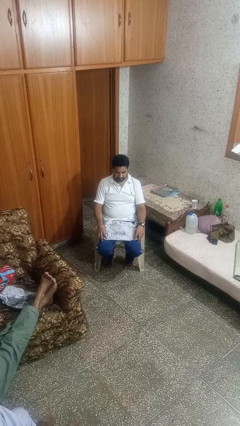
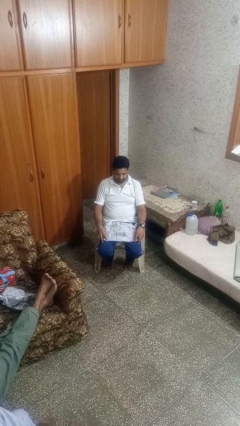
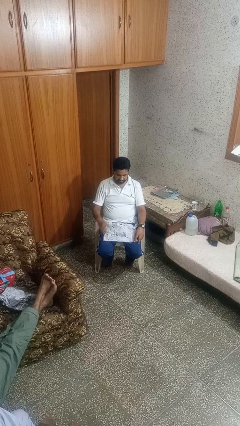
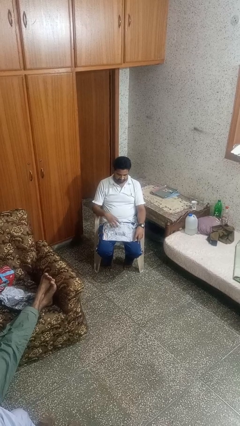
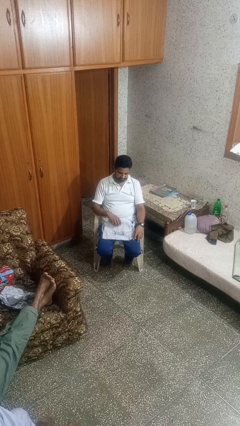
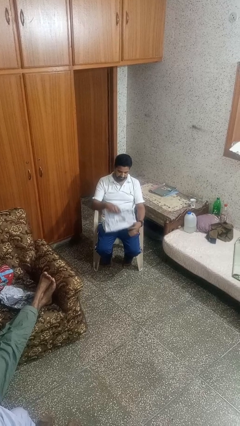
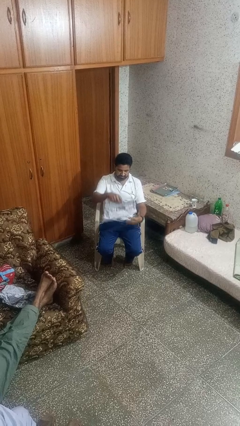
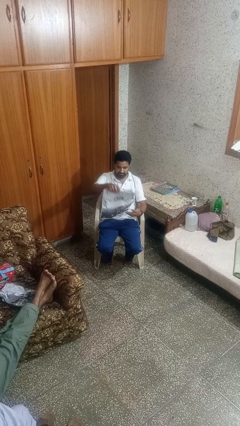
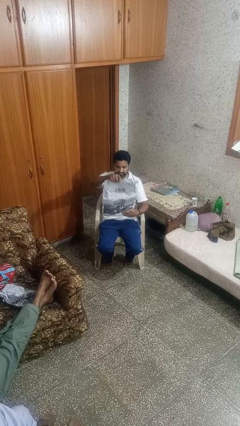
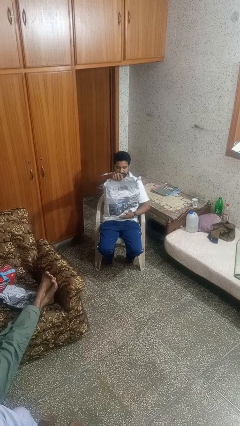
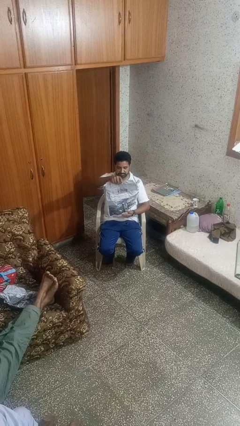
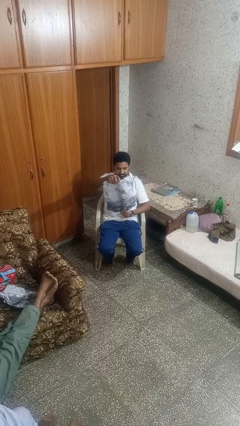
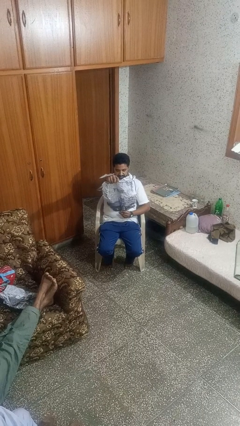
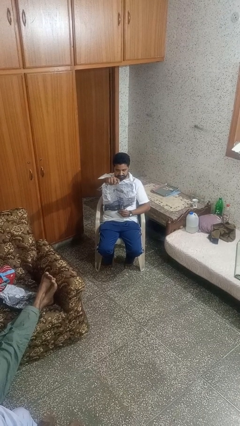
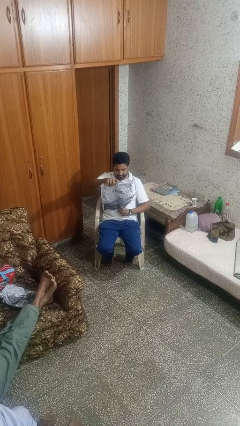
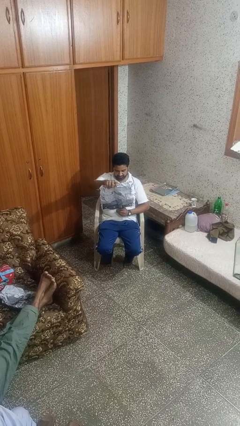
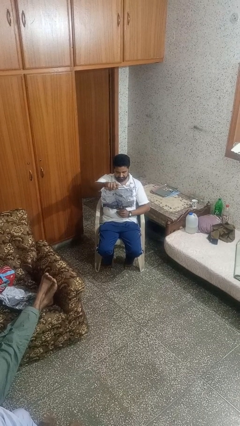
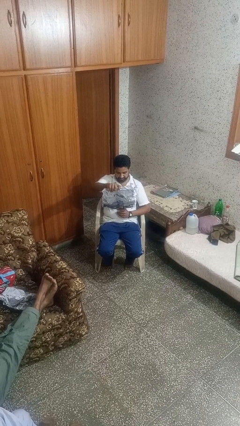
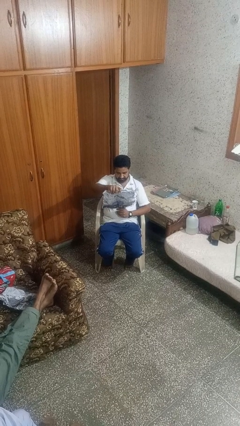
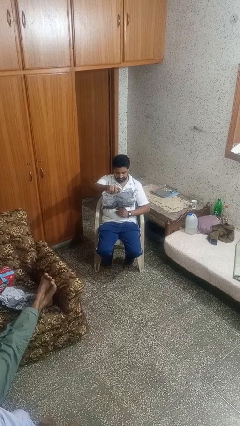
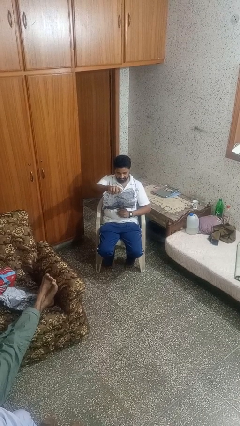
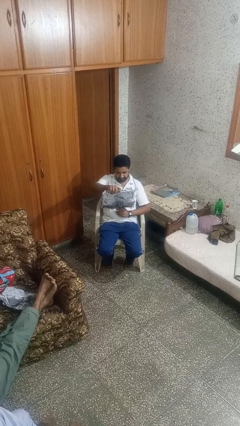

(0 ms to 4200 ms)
person reads newspaper

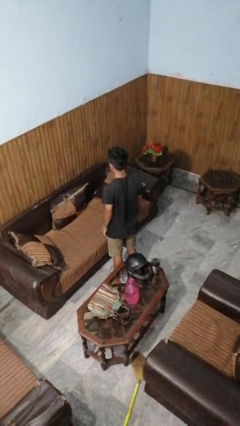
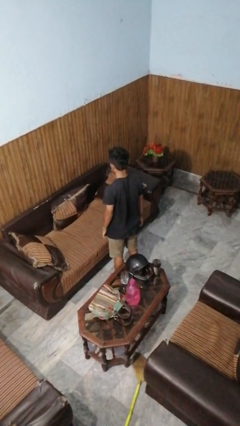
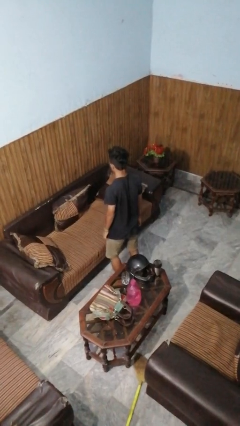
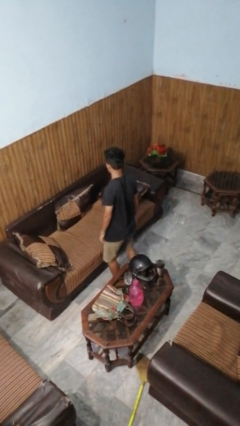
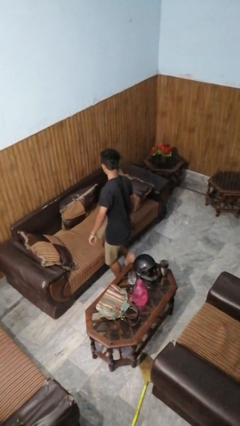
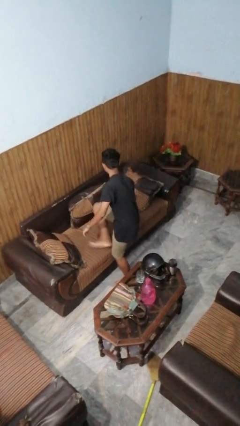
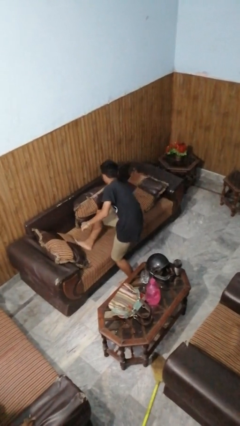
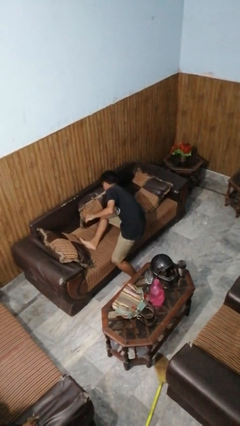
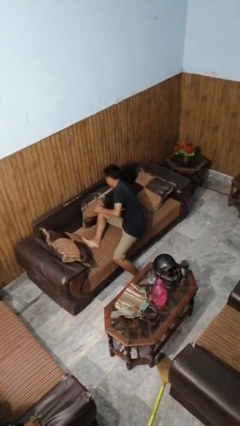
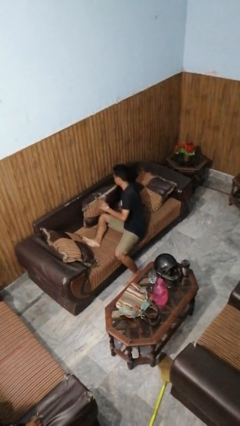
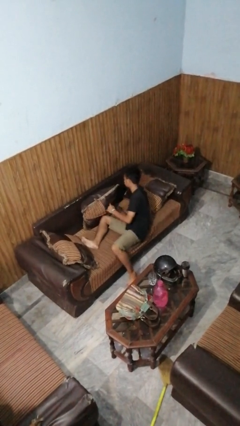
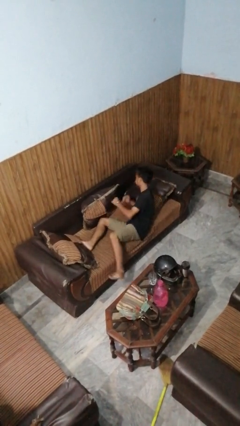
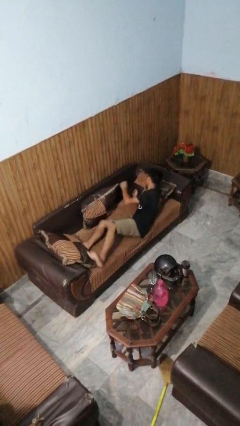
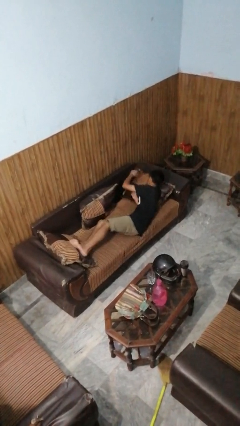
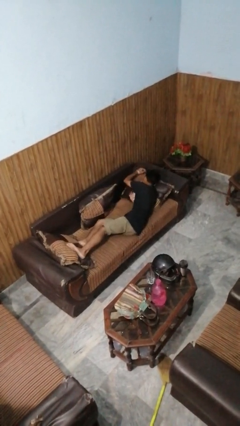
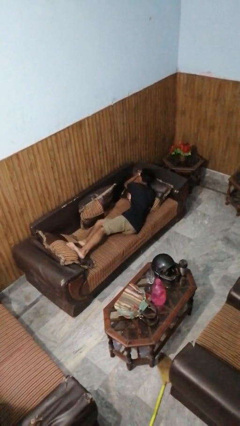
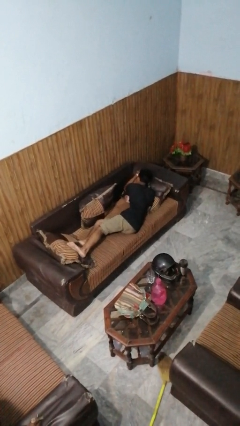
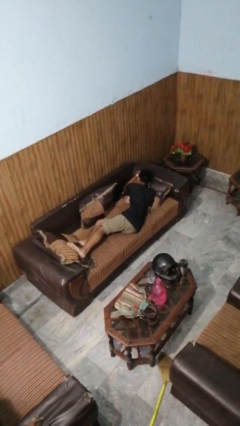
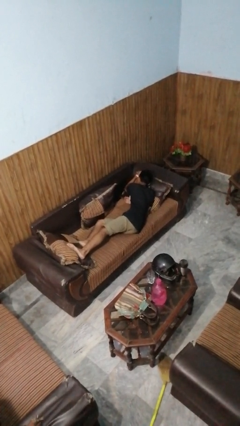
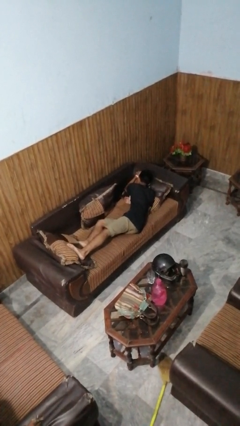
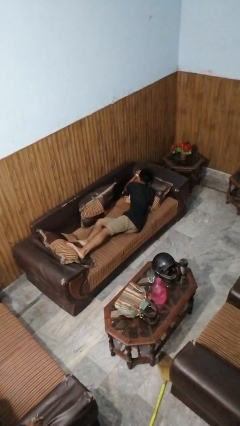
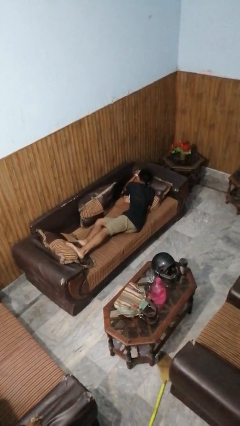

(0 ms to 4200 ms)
person lies down on couch

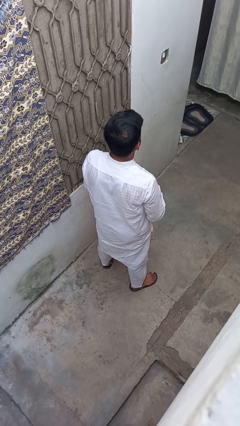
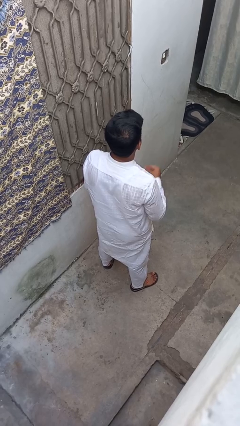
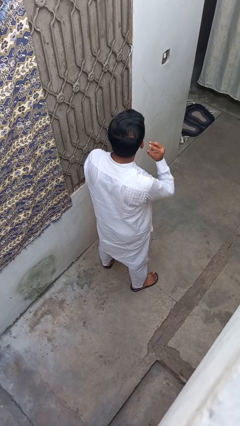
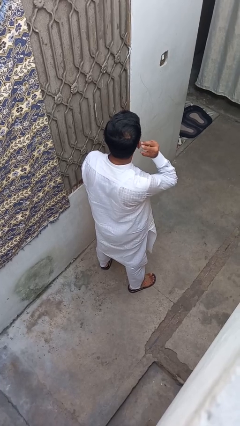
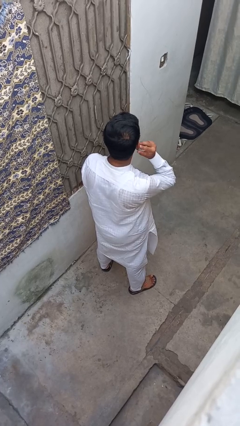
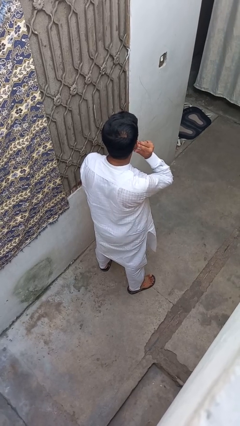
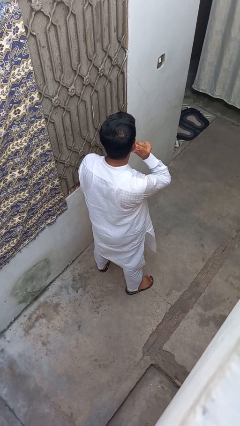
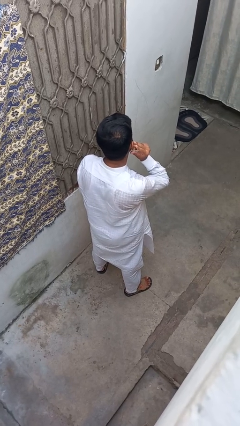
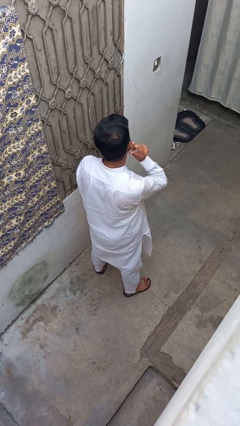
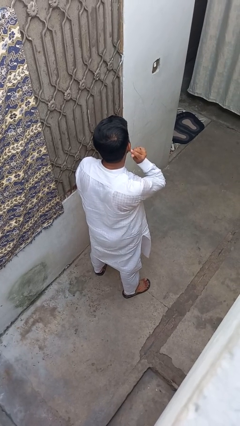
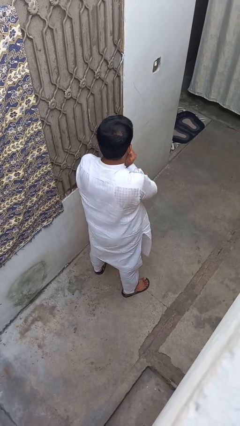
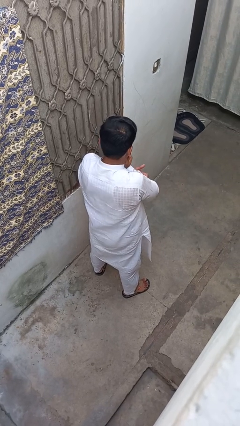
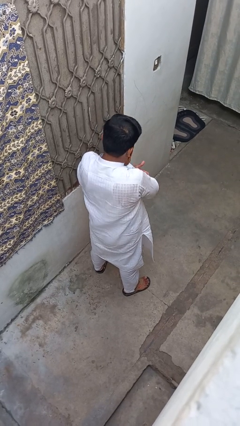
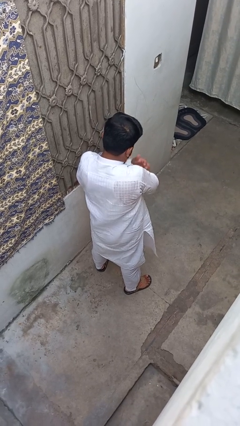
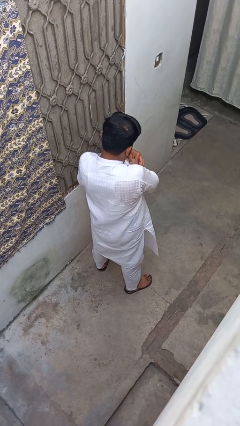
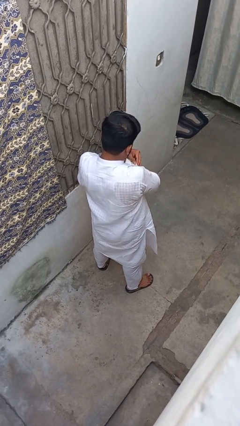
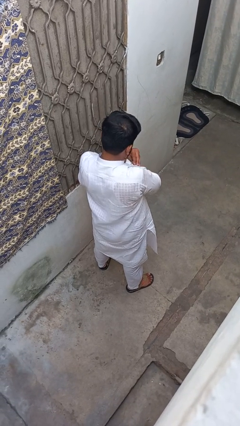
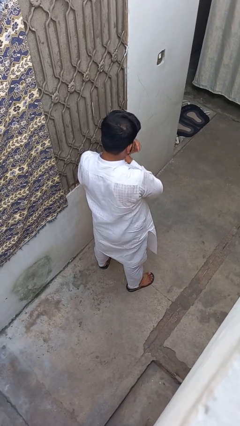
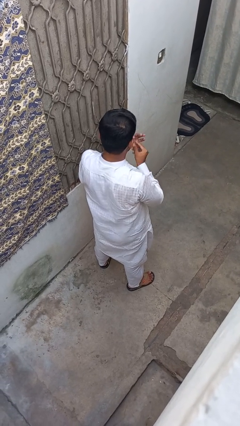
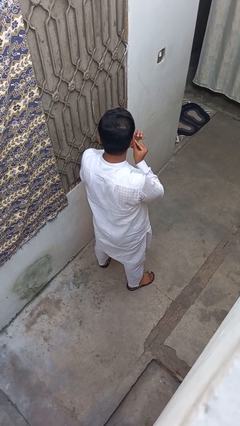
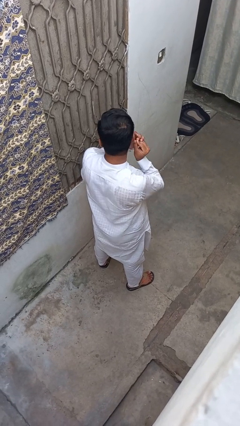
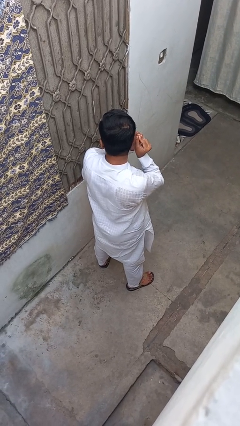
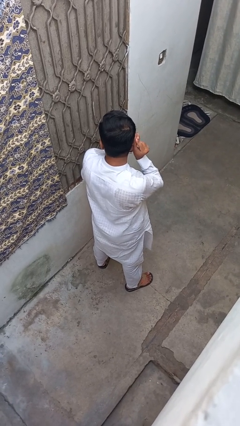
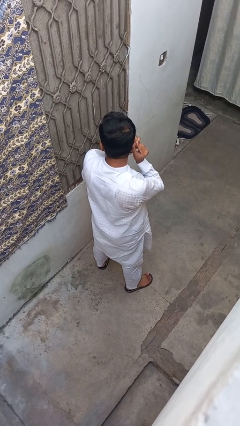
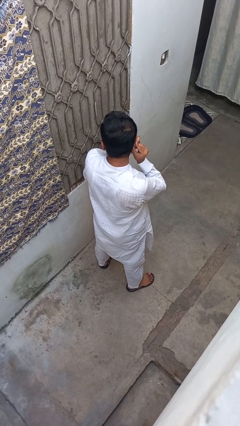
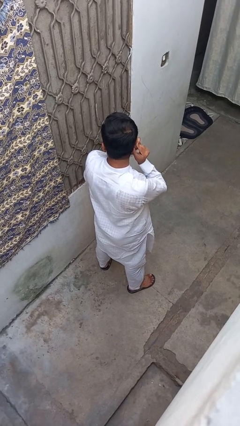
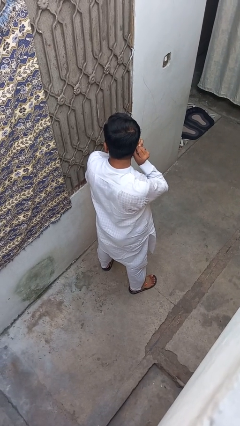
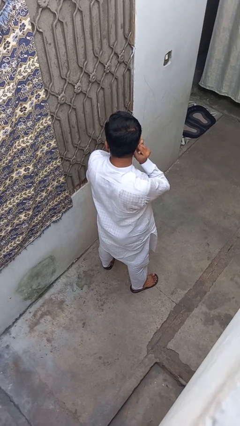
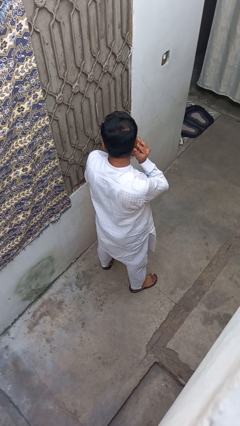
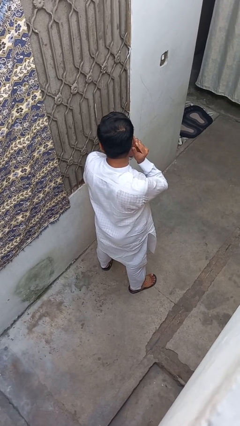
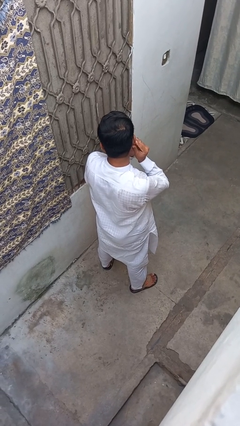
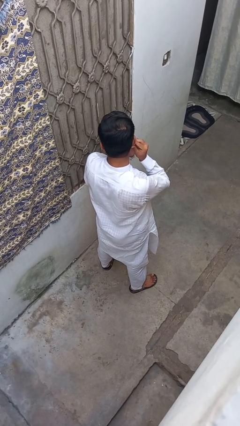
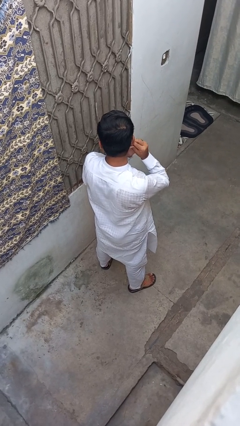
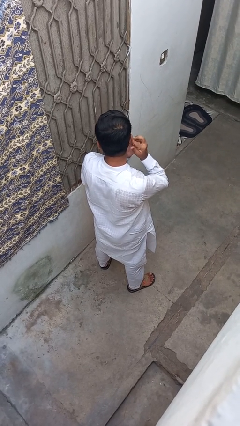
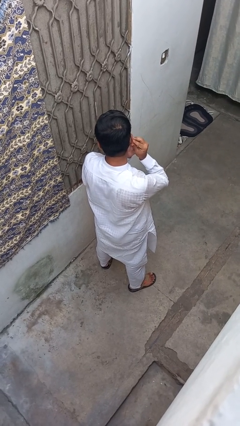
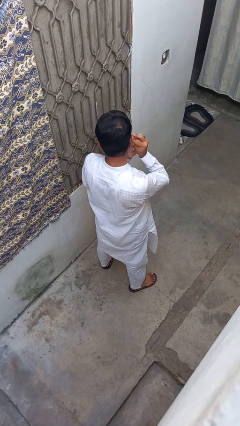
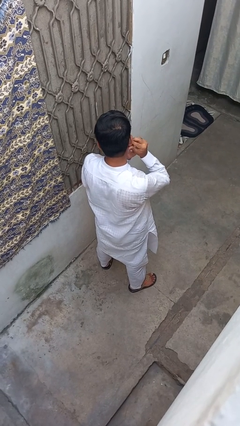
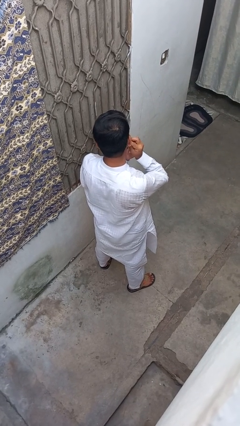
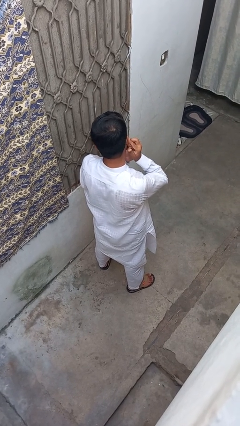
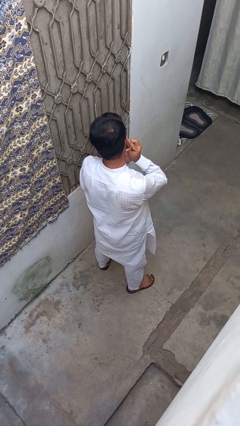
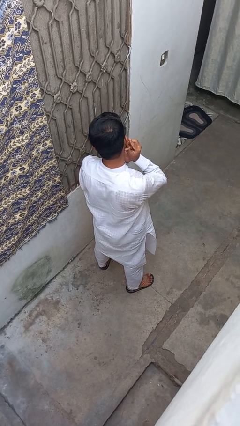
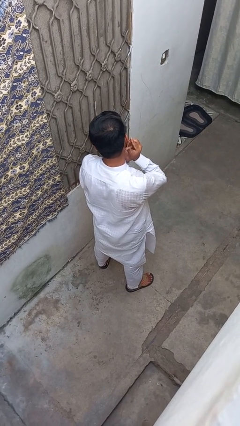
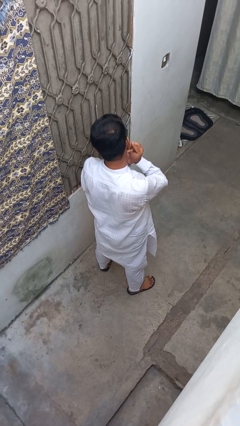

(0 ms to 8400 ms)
person puts on earrings

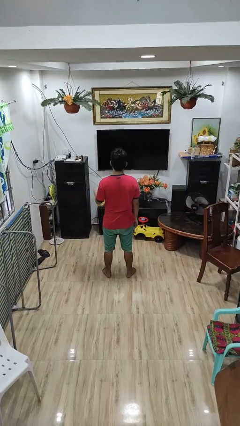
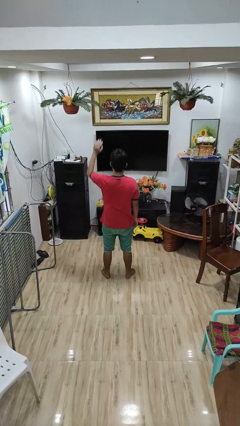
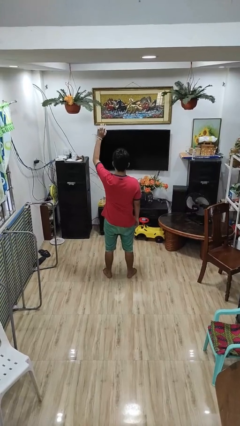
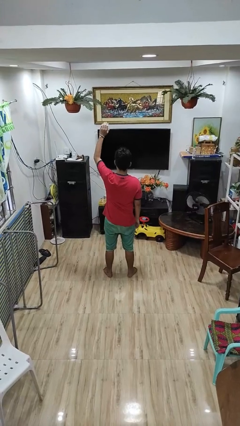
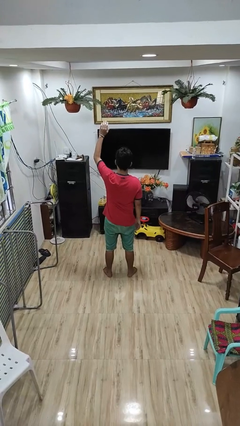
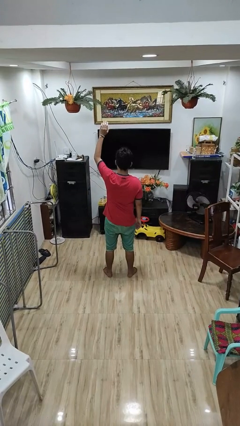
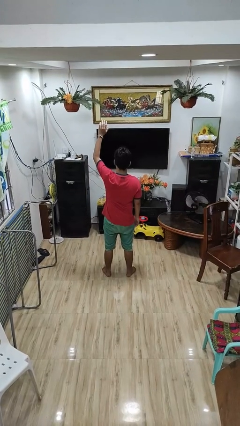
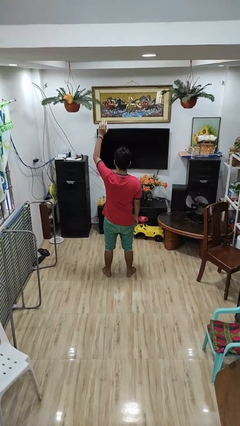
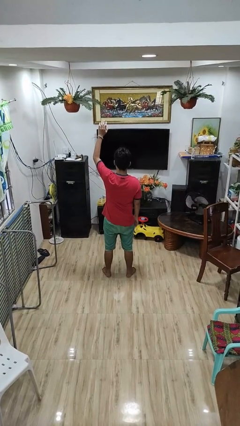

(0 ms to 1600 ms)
person gestures raise hand
